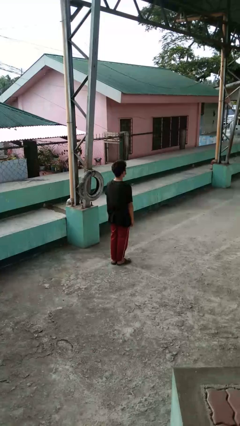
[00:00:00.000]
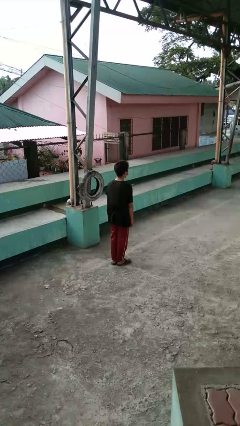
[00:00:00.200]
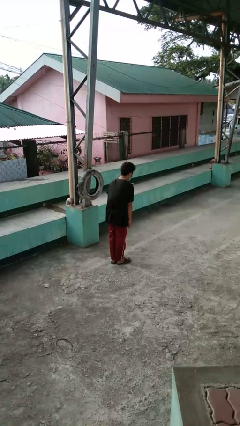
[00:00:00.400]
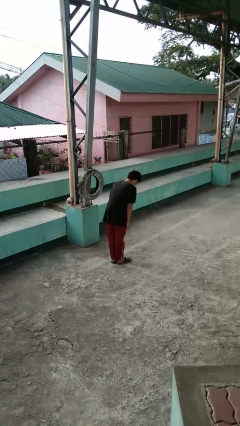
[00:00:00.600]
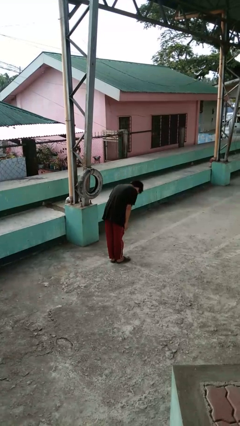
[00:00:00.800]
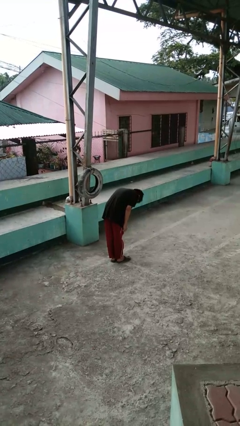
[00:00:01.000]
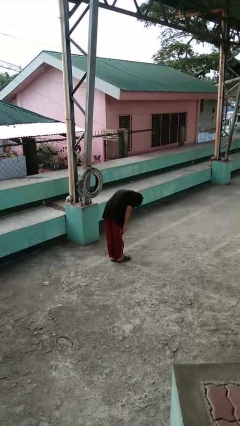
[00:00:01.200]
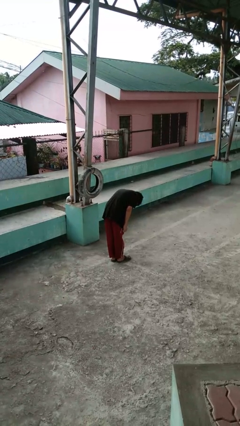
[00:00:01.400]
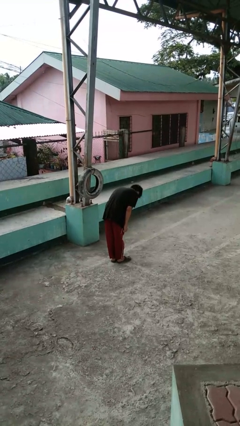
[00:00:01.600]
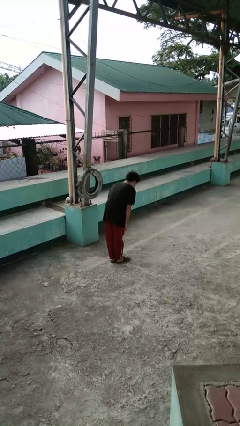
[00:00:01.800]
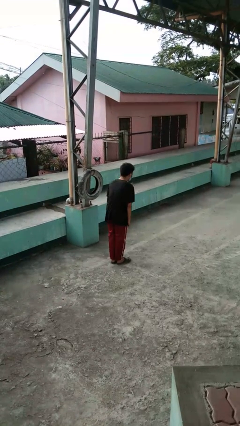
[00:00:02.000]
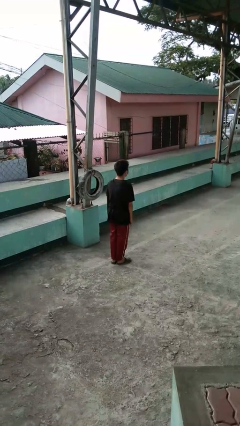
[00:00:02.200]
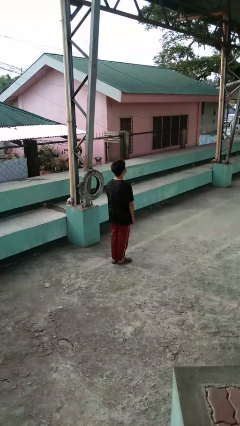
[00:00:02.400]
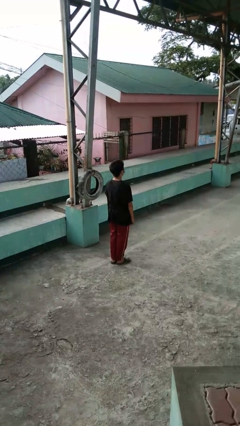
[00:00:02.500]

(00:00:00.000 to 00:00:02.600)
person bows

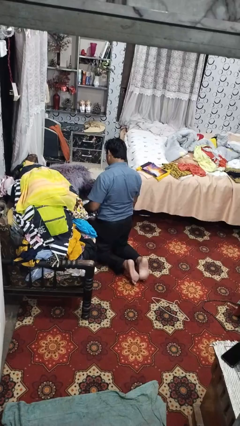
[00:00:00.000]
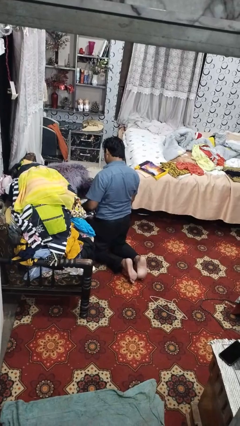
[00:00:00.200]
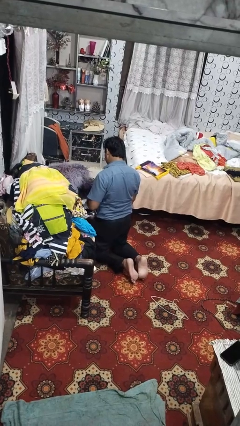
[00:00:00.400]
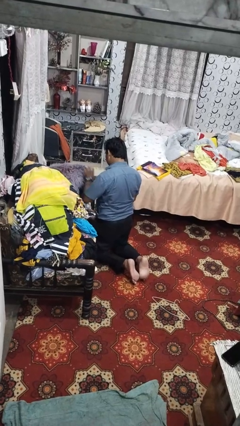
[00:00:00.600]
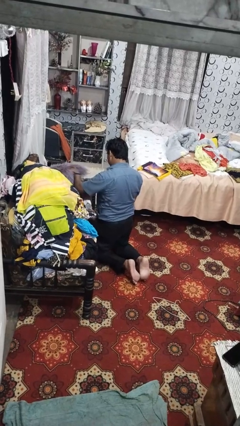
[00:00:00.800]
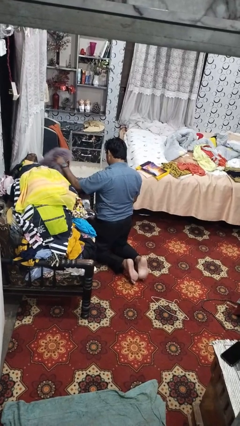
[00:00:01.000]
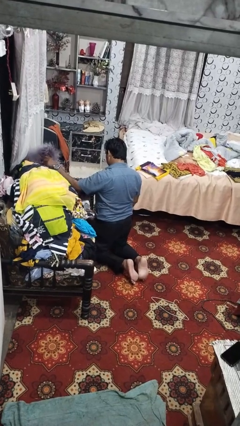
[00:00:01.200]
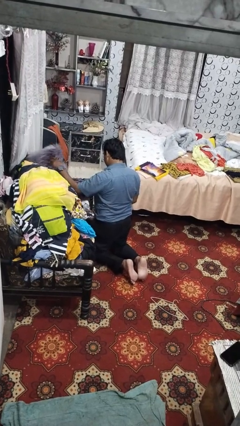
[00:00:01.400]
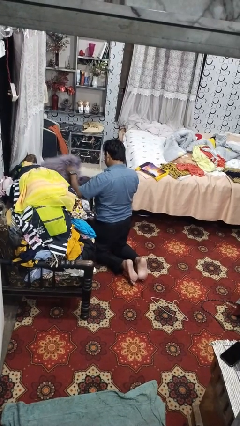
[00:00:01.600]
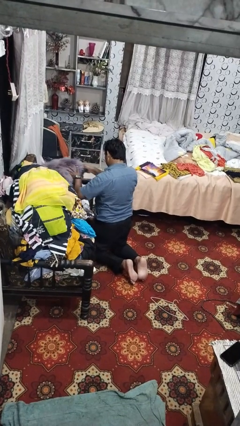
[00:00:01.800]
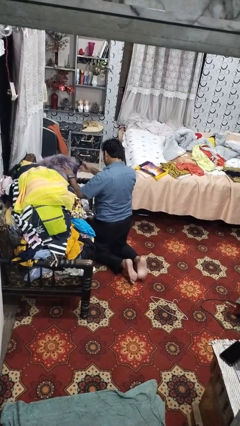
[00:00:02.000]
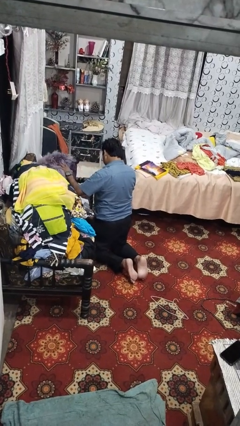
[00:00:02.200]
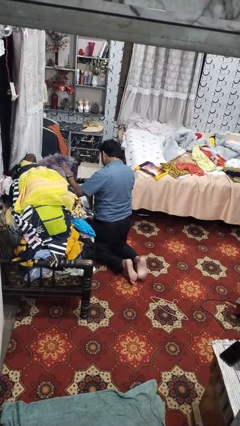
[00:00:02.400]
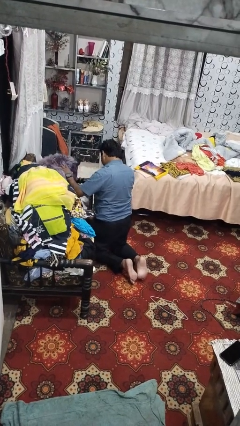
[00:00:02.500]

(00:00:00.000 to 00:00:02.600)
person searches in couch

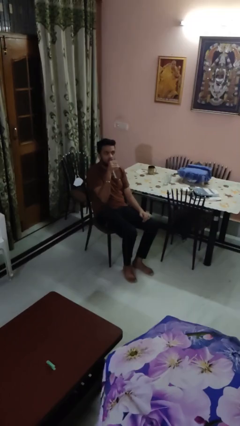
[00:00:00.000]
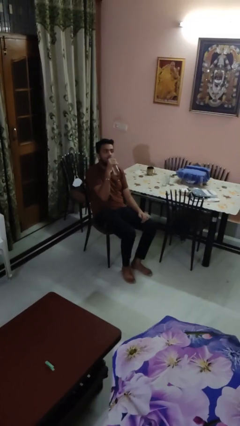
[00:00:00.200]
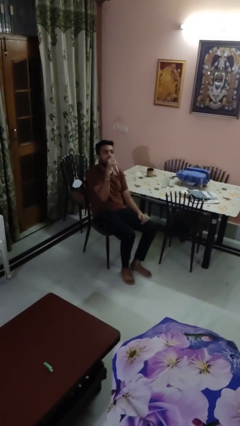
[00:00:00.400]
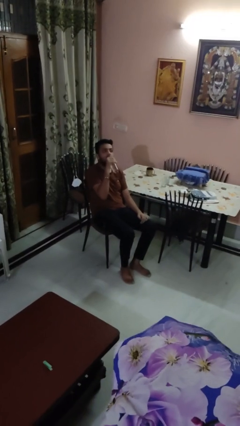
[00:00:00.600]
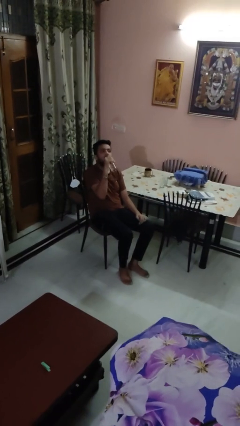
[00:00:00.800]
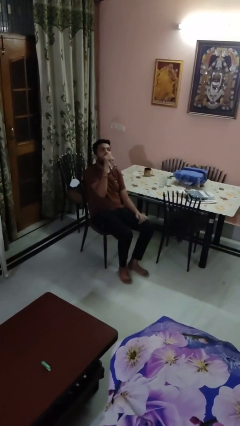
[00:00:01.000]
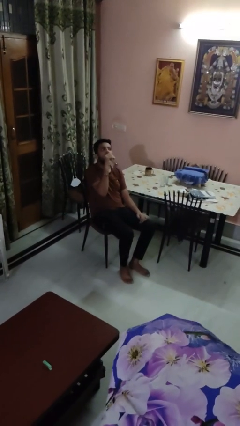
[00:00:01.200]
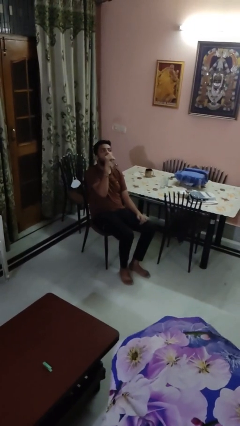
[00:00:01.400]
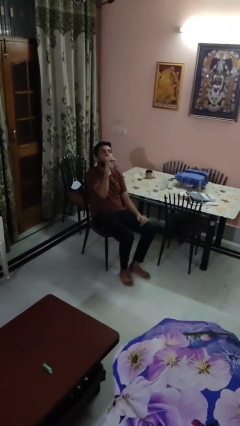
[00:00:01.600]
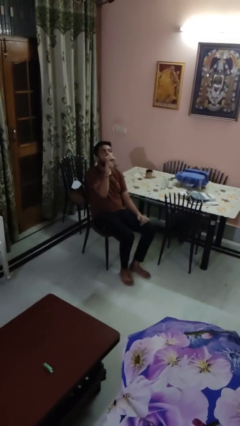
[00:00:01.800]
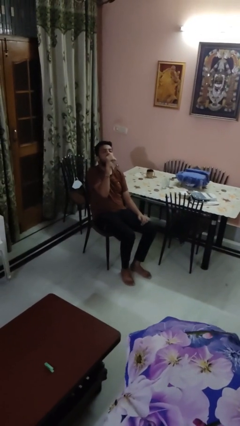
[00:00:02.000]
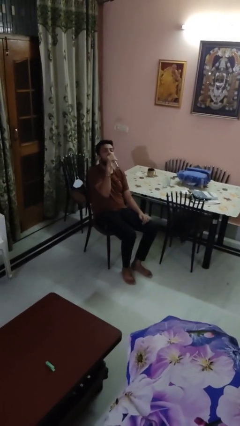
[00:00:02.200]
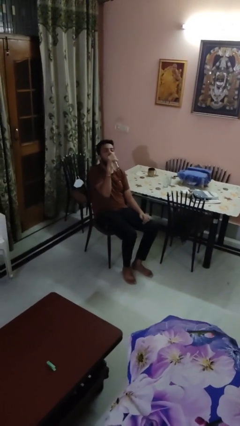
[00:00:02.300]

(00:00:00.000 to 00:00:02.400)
person drinks from bottle

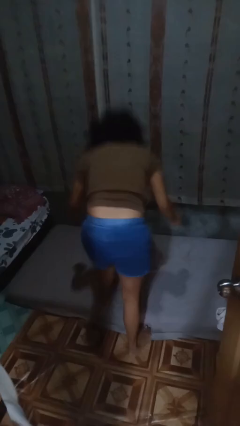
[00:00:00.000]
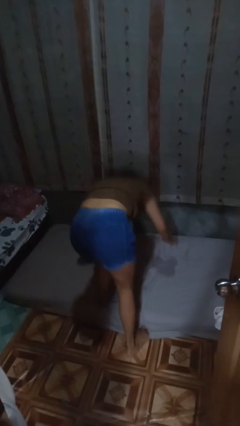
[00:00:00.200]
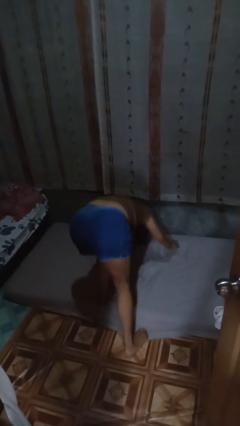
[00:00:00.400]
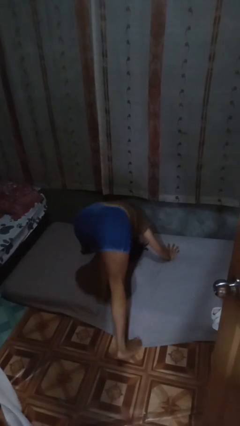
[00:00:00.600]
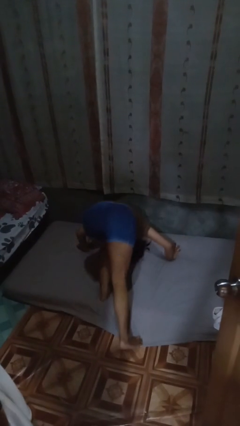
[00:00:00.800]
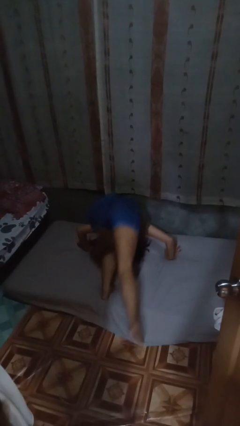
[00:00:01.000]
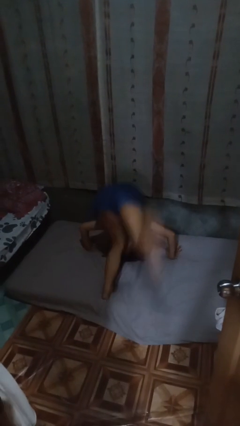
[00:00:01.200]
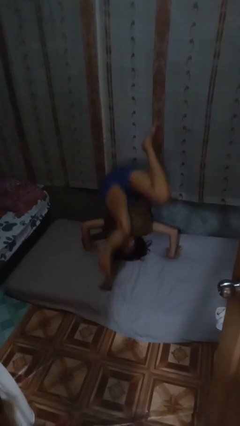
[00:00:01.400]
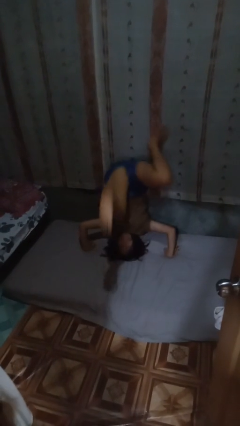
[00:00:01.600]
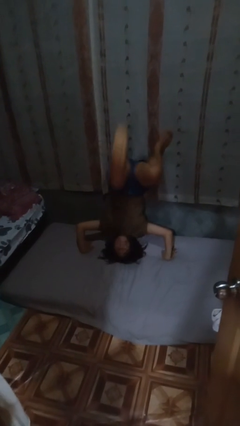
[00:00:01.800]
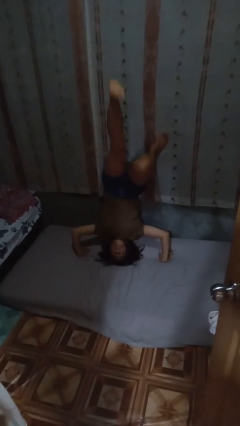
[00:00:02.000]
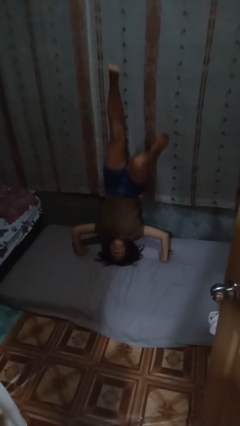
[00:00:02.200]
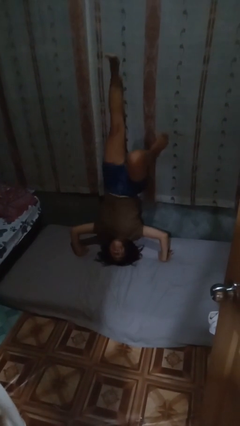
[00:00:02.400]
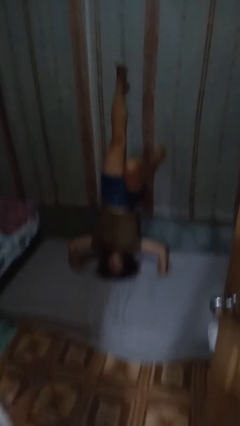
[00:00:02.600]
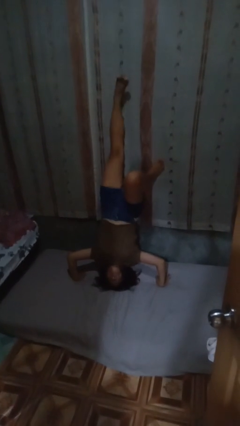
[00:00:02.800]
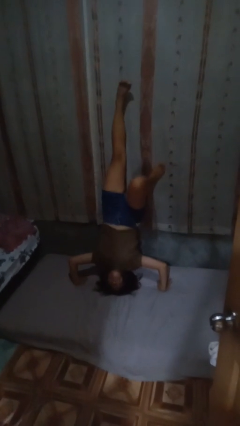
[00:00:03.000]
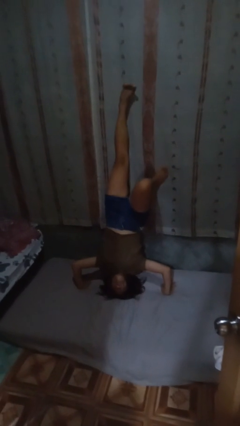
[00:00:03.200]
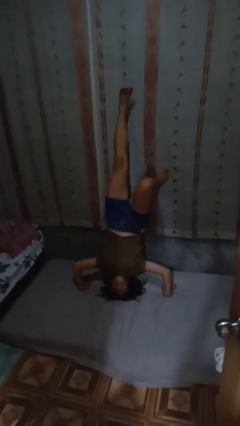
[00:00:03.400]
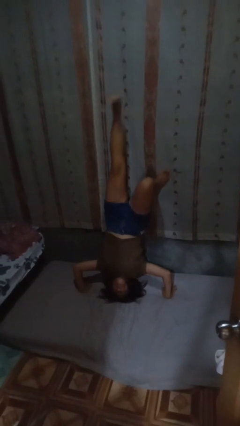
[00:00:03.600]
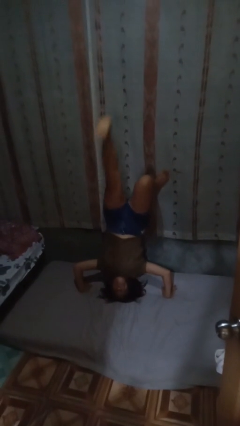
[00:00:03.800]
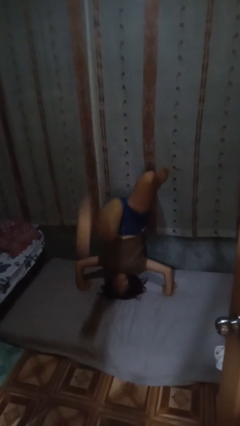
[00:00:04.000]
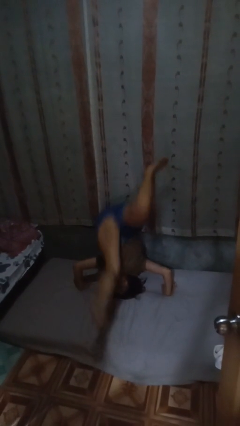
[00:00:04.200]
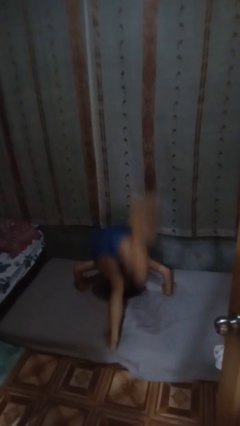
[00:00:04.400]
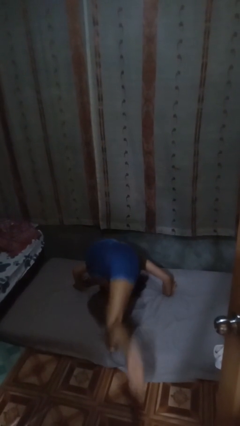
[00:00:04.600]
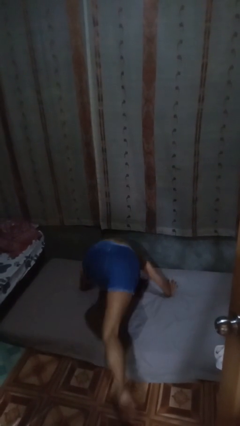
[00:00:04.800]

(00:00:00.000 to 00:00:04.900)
person handstand

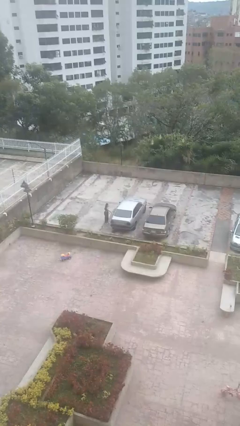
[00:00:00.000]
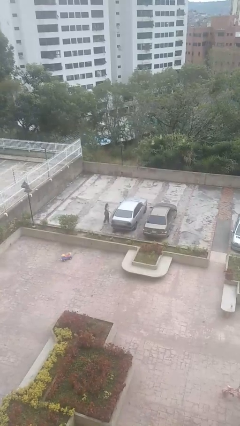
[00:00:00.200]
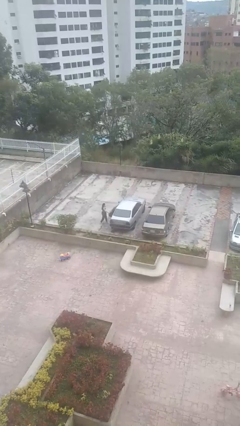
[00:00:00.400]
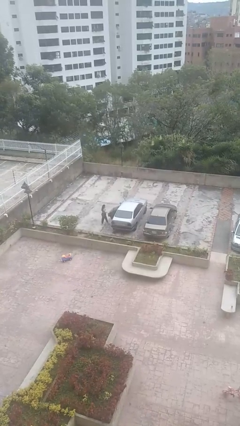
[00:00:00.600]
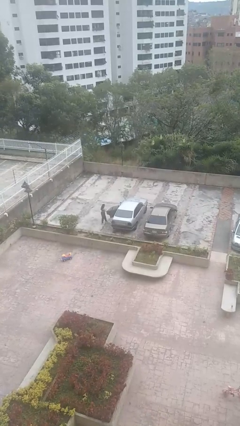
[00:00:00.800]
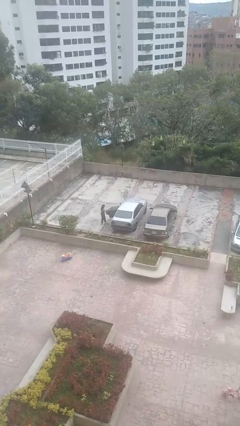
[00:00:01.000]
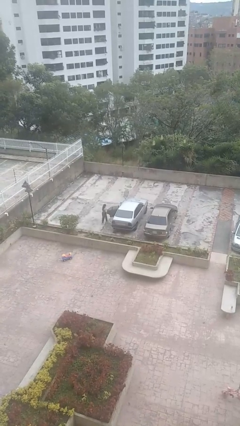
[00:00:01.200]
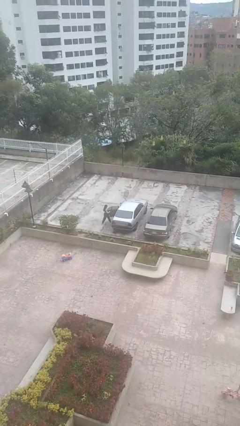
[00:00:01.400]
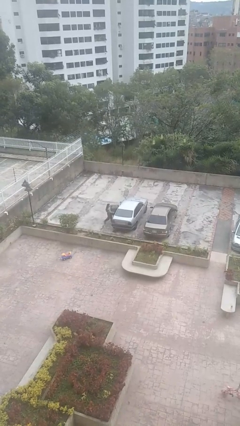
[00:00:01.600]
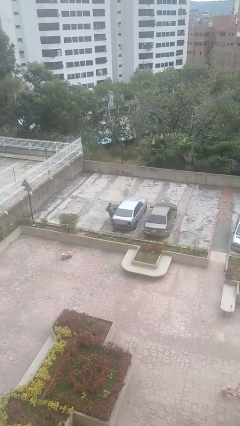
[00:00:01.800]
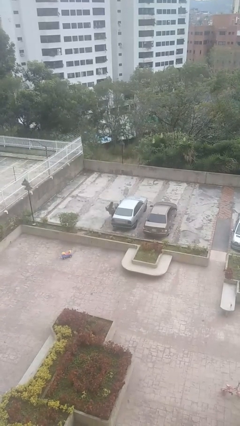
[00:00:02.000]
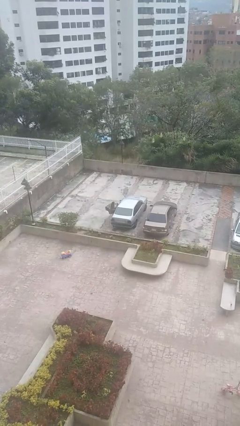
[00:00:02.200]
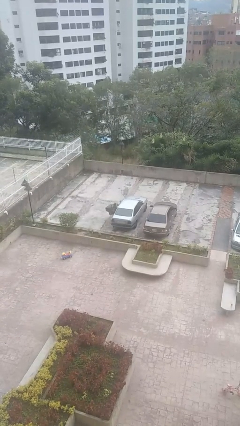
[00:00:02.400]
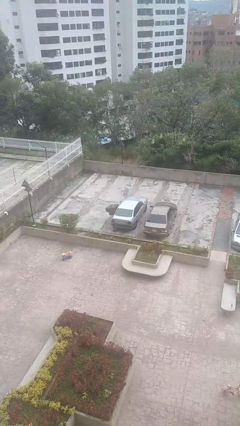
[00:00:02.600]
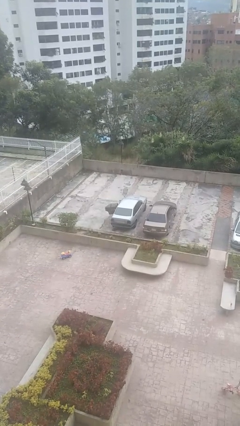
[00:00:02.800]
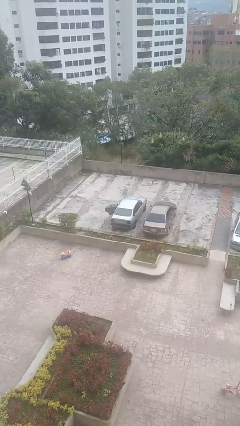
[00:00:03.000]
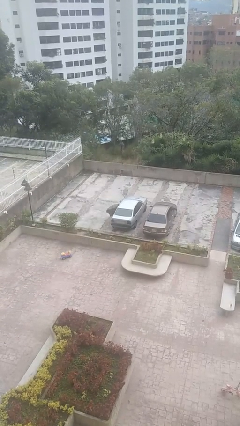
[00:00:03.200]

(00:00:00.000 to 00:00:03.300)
car picks up person

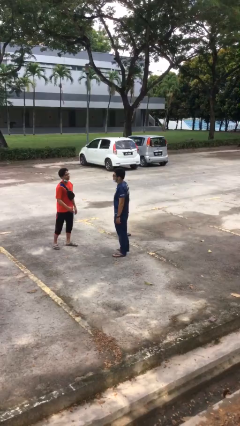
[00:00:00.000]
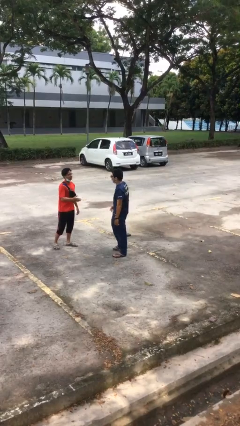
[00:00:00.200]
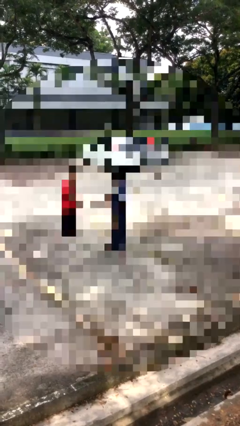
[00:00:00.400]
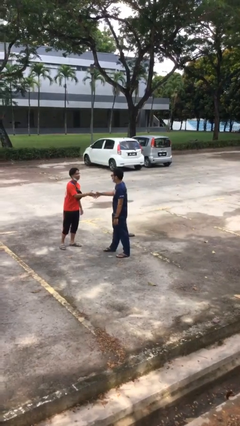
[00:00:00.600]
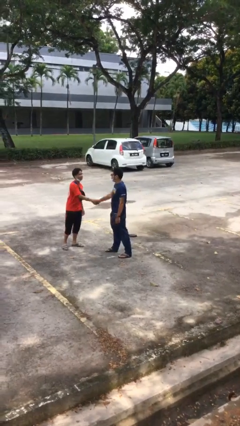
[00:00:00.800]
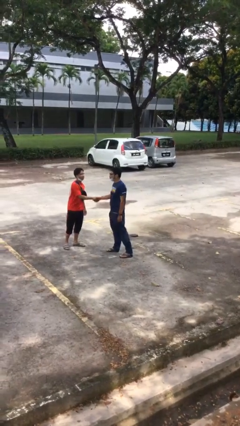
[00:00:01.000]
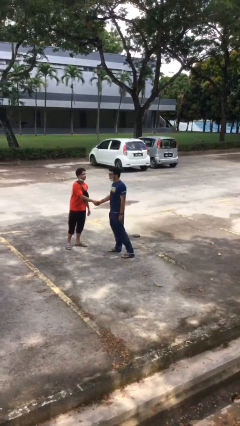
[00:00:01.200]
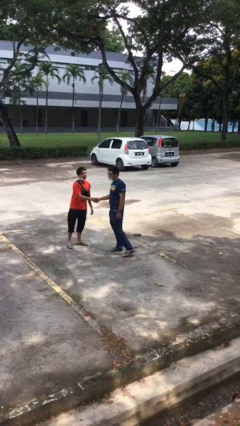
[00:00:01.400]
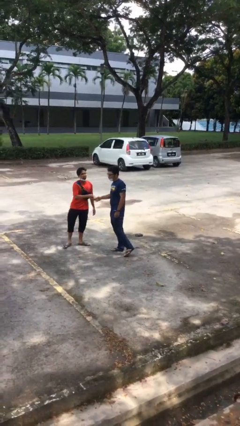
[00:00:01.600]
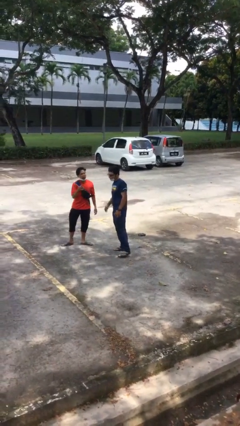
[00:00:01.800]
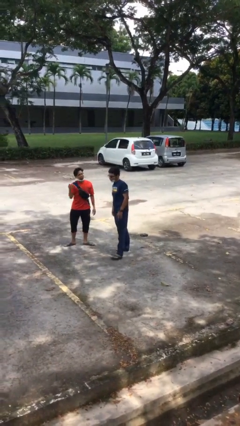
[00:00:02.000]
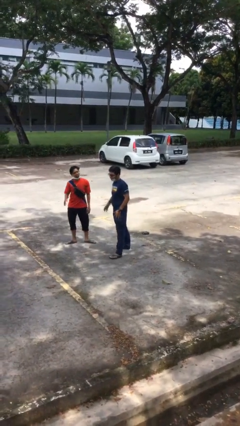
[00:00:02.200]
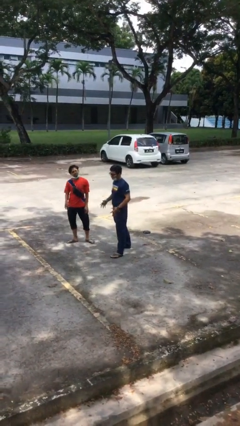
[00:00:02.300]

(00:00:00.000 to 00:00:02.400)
person shakes hand
